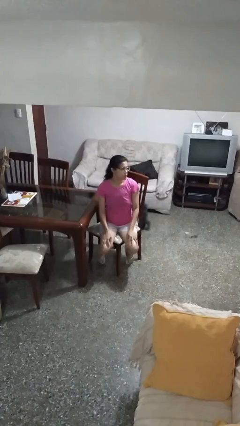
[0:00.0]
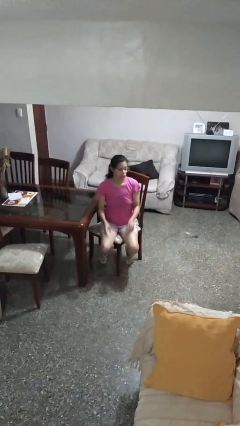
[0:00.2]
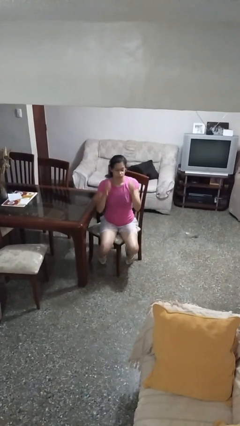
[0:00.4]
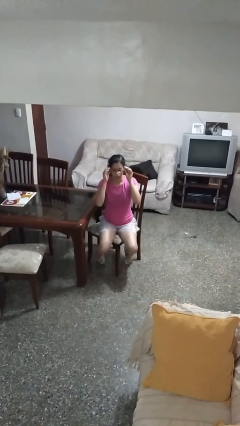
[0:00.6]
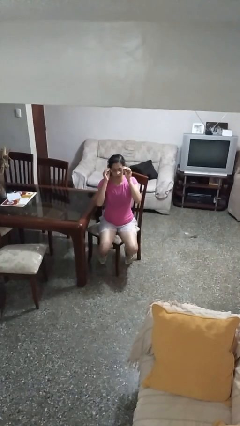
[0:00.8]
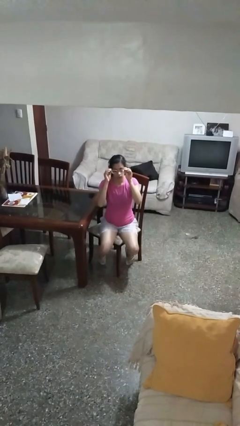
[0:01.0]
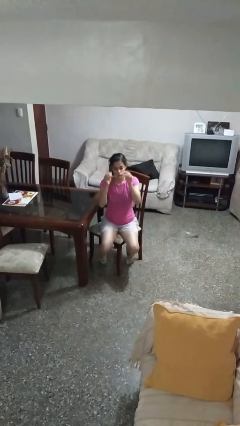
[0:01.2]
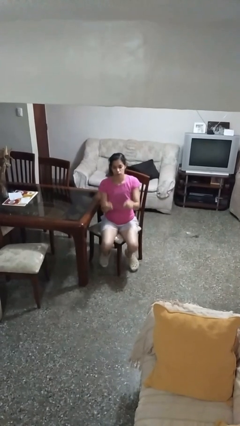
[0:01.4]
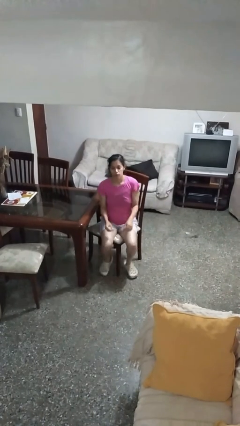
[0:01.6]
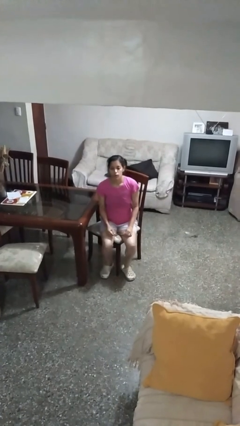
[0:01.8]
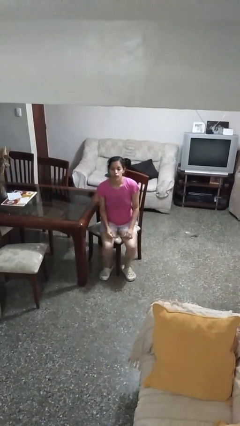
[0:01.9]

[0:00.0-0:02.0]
person takes off glasses

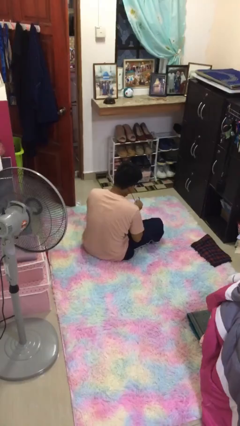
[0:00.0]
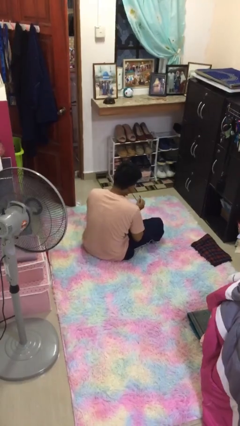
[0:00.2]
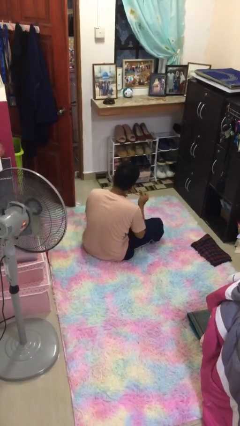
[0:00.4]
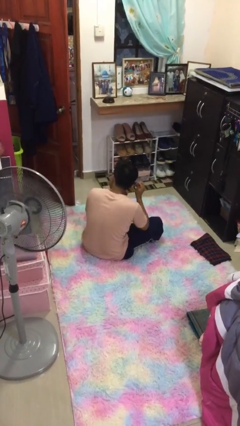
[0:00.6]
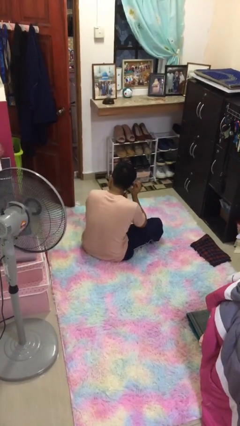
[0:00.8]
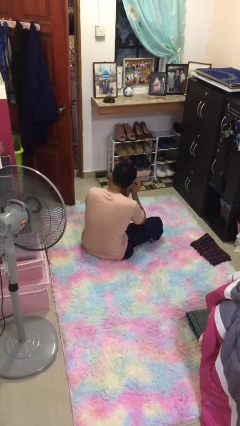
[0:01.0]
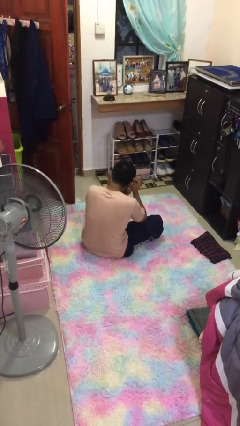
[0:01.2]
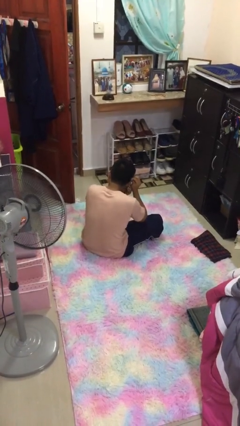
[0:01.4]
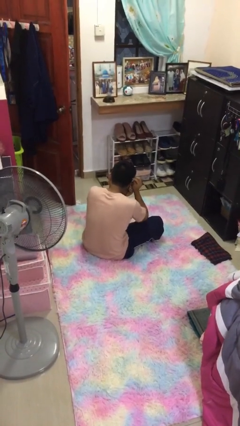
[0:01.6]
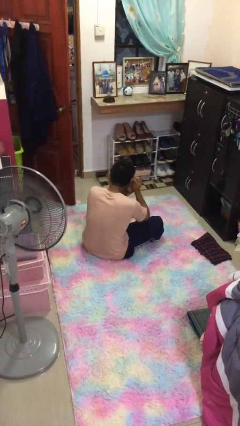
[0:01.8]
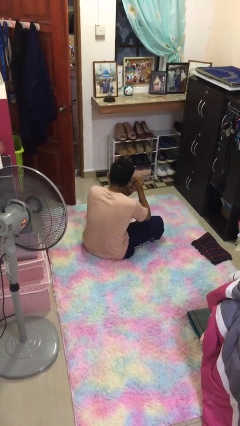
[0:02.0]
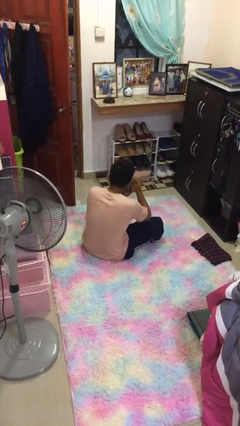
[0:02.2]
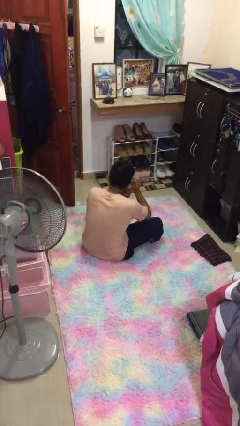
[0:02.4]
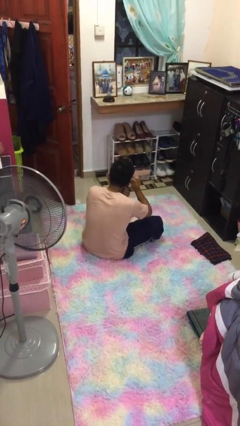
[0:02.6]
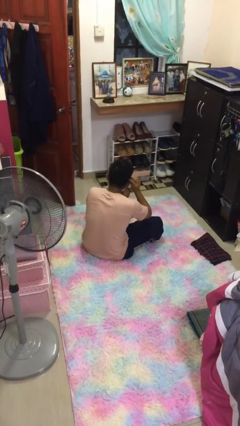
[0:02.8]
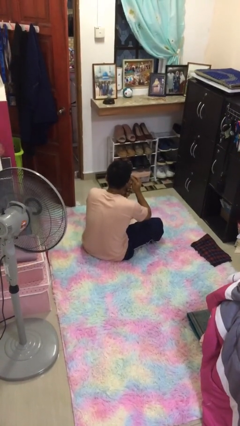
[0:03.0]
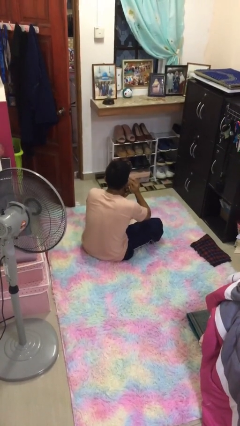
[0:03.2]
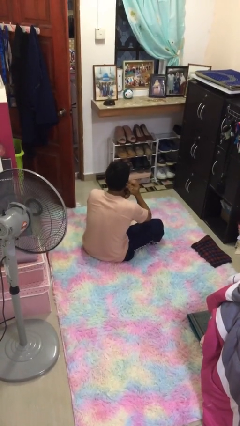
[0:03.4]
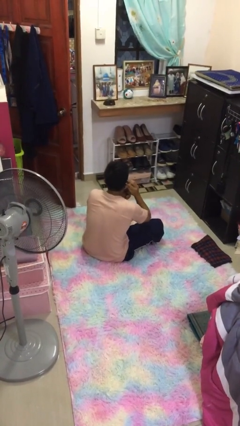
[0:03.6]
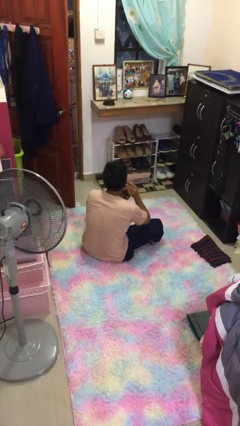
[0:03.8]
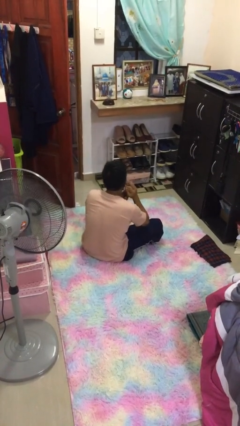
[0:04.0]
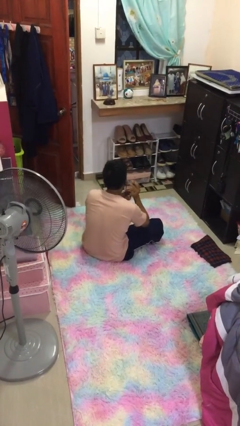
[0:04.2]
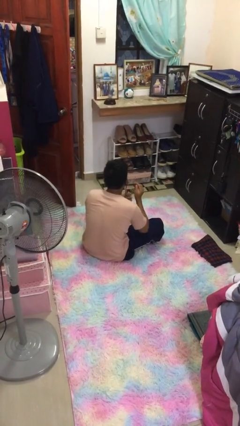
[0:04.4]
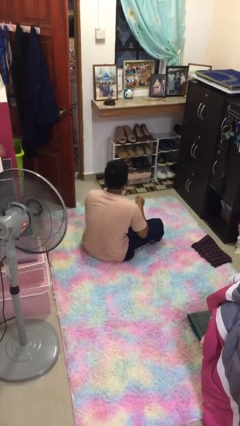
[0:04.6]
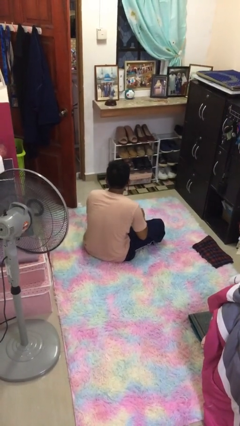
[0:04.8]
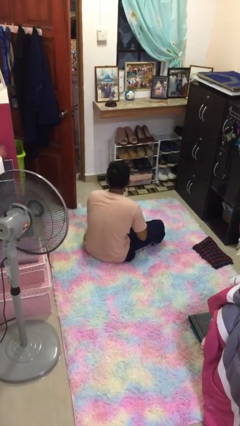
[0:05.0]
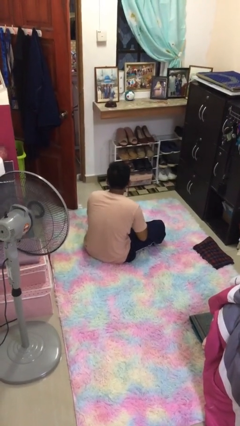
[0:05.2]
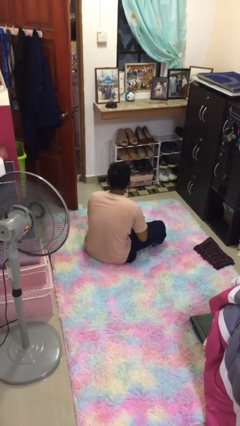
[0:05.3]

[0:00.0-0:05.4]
person puts on earrings

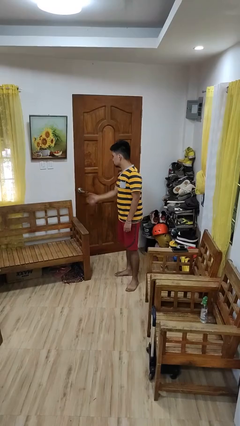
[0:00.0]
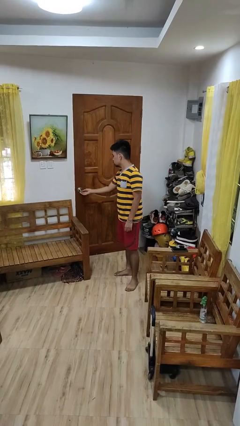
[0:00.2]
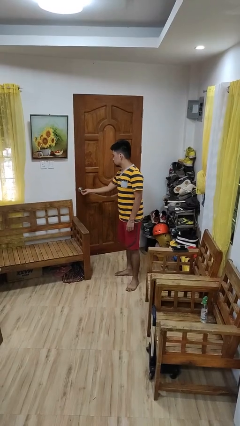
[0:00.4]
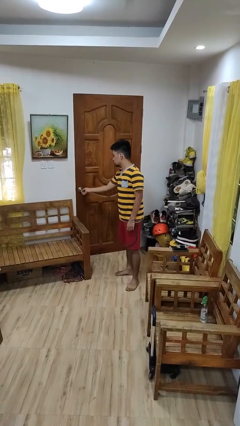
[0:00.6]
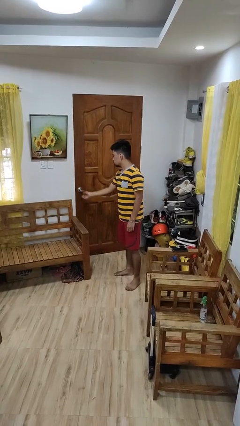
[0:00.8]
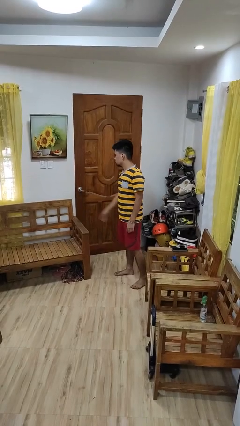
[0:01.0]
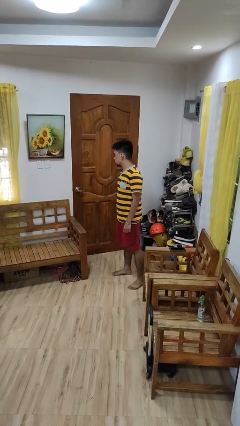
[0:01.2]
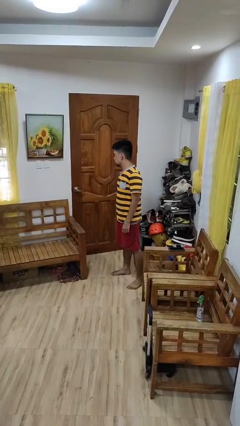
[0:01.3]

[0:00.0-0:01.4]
person locks door with keys

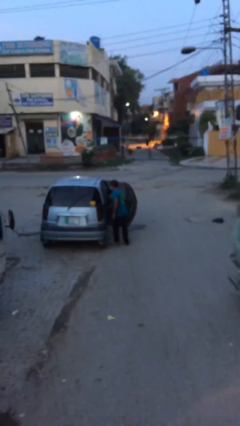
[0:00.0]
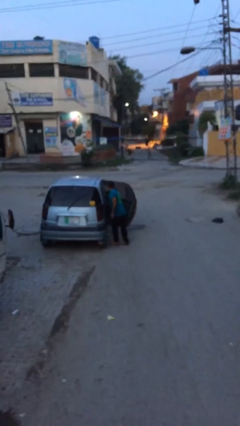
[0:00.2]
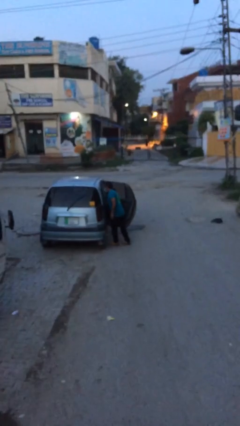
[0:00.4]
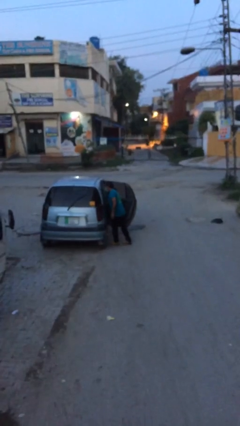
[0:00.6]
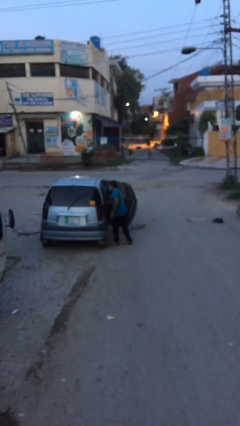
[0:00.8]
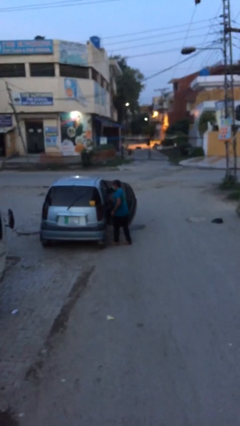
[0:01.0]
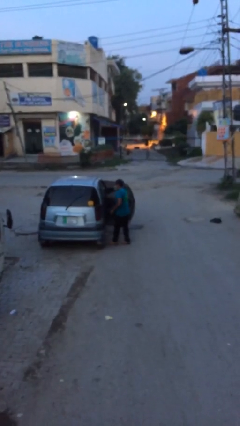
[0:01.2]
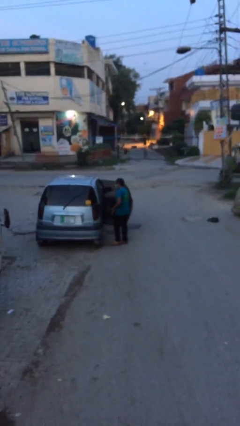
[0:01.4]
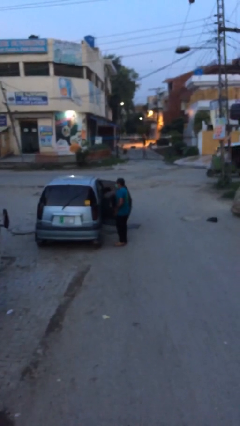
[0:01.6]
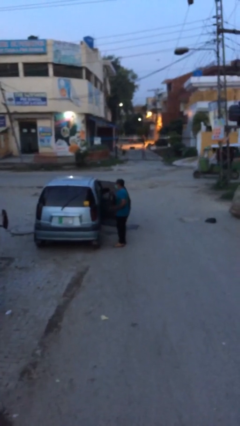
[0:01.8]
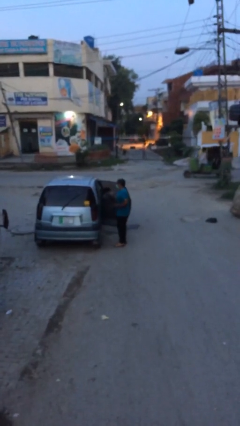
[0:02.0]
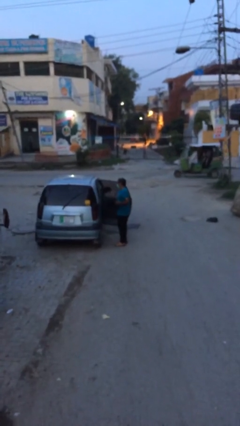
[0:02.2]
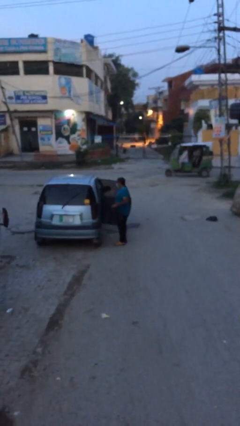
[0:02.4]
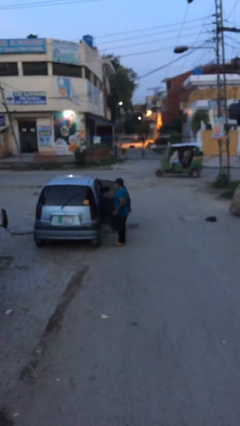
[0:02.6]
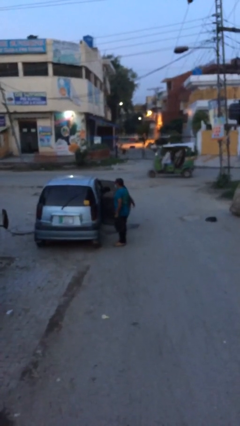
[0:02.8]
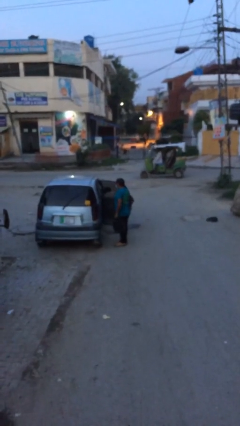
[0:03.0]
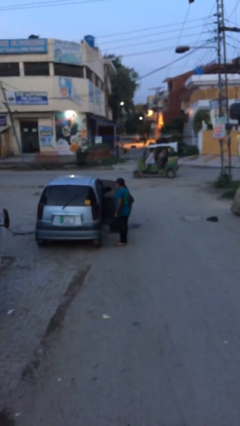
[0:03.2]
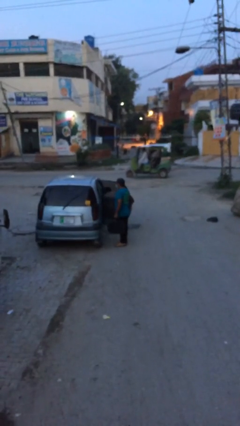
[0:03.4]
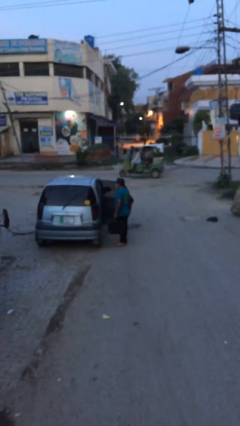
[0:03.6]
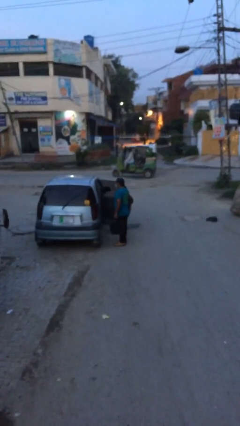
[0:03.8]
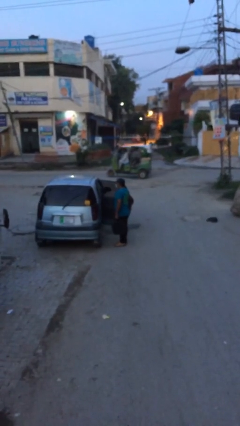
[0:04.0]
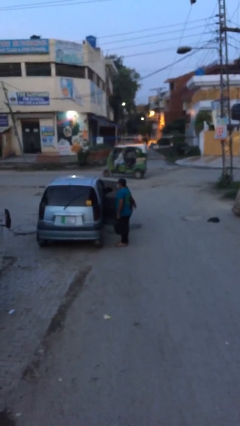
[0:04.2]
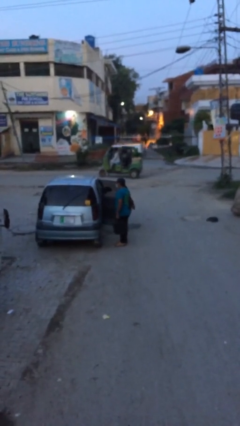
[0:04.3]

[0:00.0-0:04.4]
person unloads car

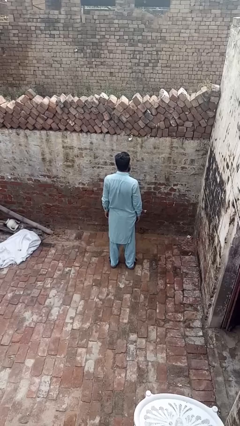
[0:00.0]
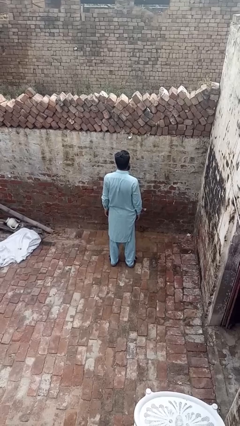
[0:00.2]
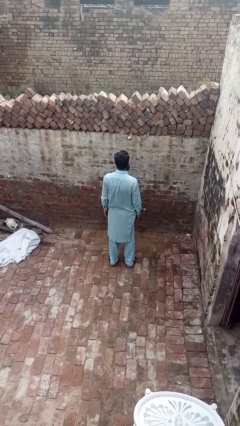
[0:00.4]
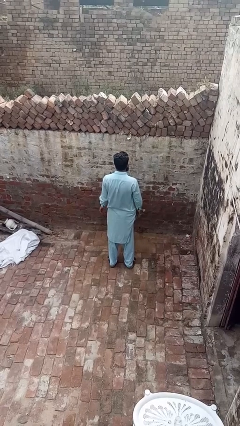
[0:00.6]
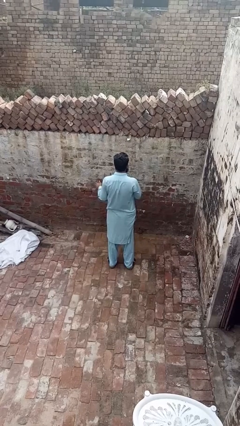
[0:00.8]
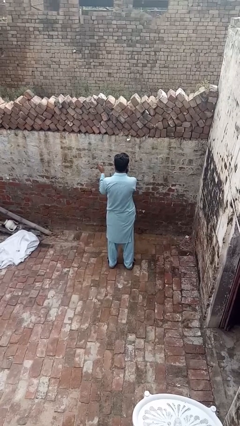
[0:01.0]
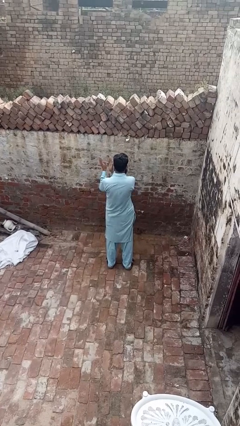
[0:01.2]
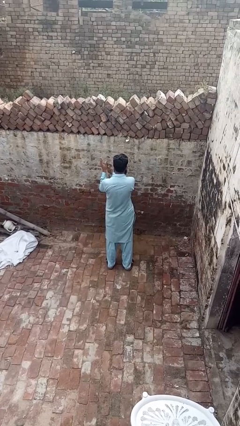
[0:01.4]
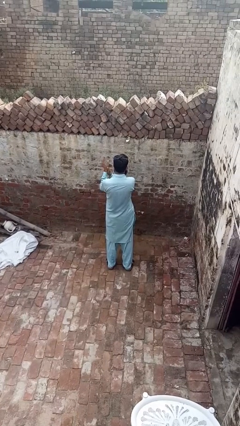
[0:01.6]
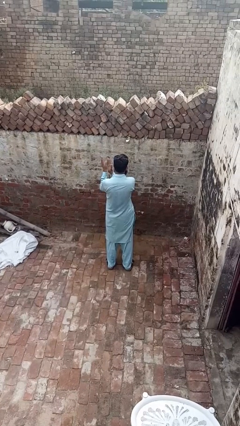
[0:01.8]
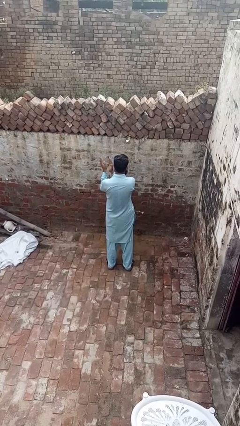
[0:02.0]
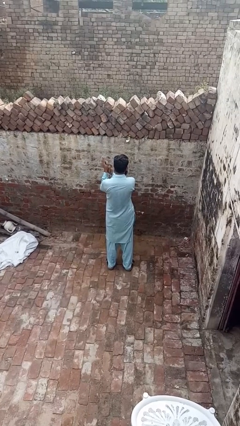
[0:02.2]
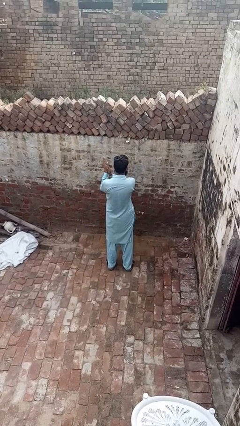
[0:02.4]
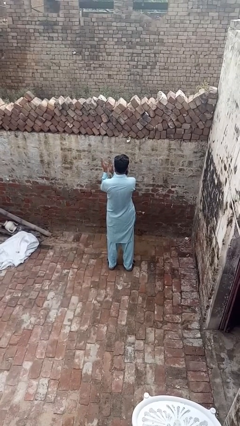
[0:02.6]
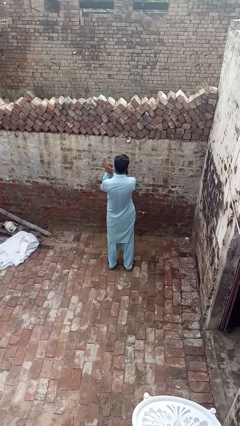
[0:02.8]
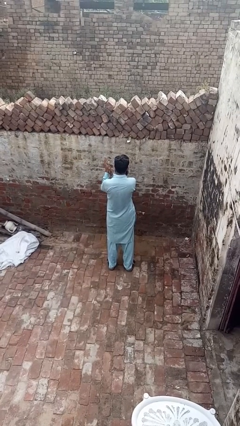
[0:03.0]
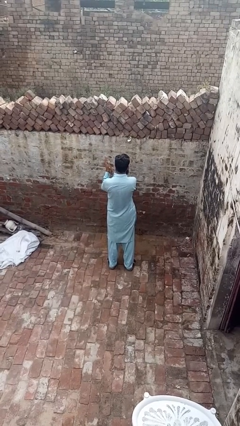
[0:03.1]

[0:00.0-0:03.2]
person claps hands

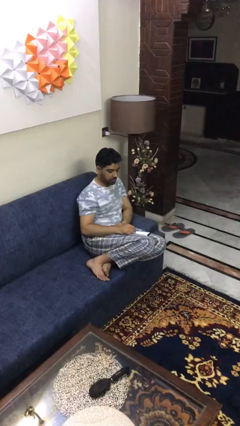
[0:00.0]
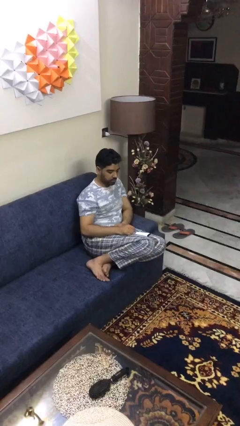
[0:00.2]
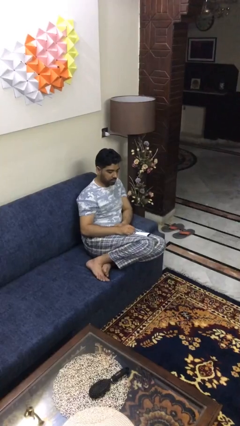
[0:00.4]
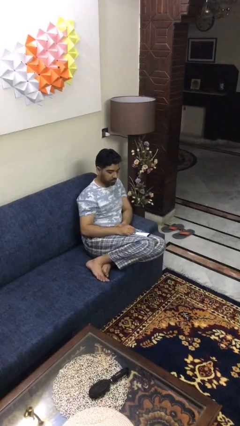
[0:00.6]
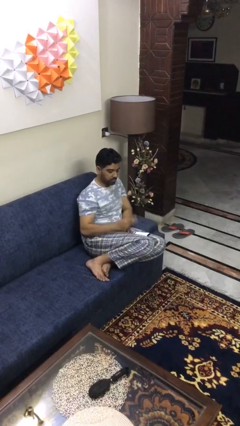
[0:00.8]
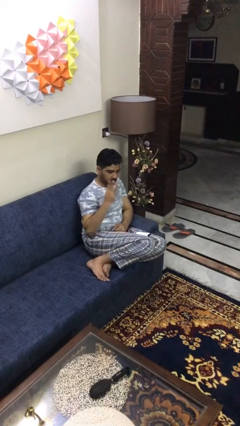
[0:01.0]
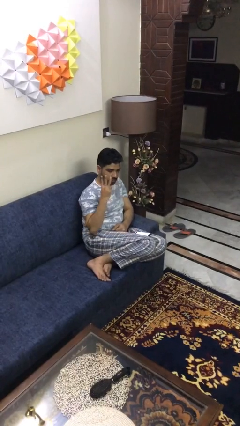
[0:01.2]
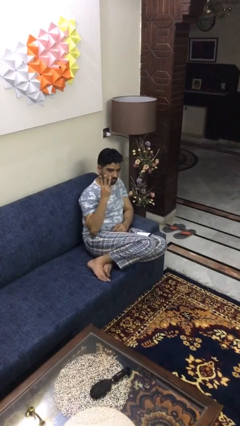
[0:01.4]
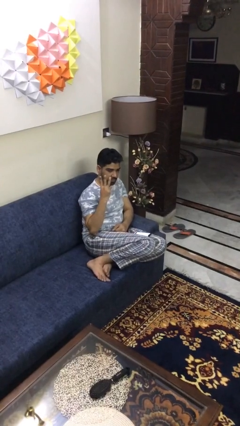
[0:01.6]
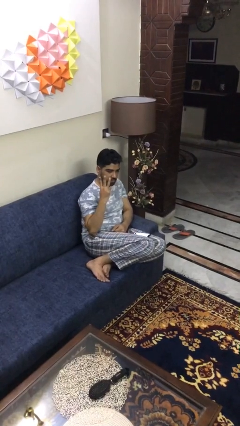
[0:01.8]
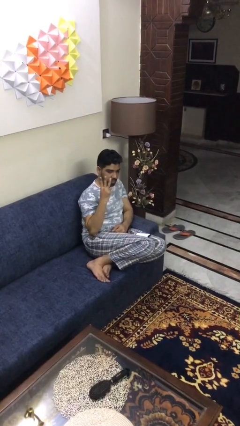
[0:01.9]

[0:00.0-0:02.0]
person gestures number three
